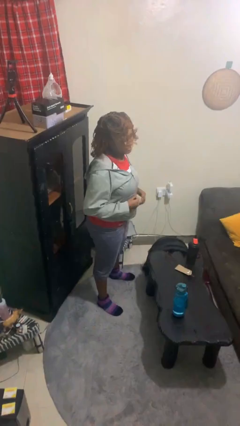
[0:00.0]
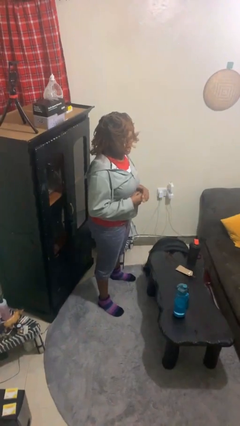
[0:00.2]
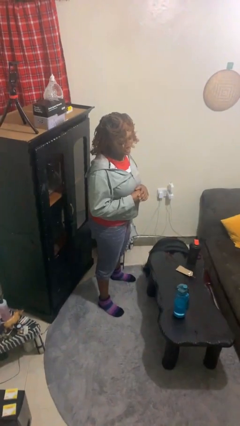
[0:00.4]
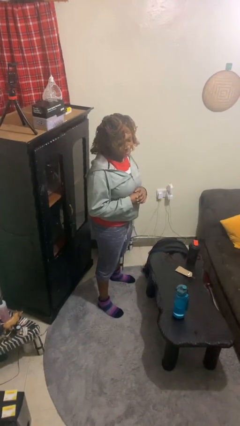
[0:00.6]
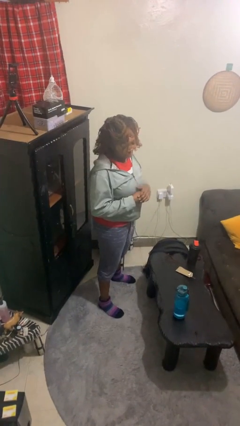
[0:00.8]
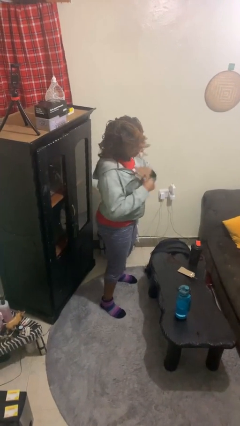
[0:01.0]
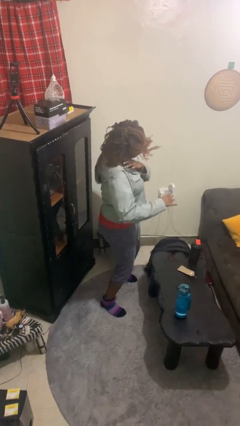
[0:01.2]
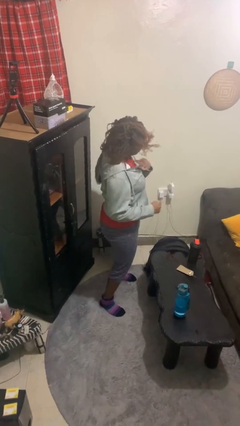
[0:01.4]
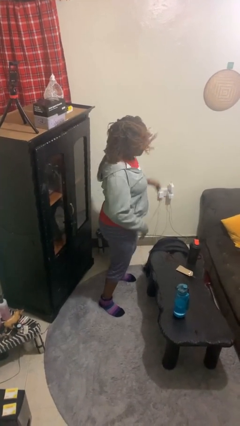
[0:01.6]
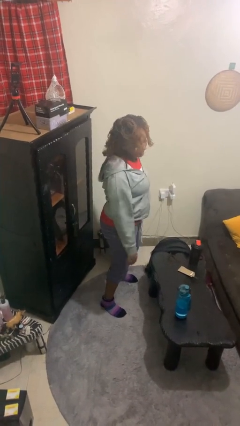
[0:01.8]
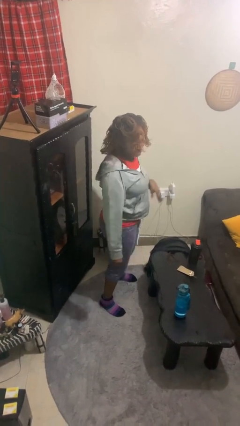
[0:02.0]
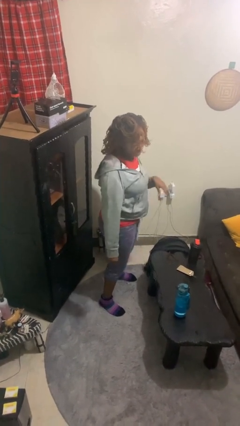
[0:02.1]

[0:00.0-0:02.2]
person karate chop

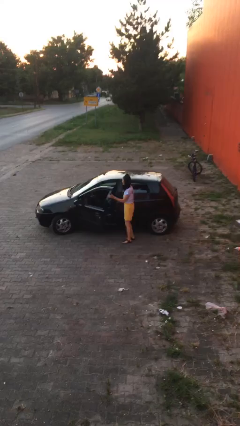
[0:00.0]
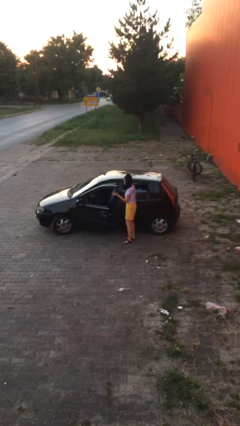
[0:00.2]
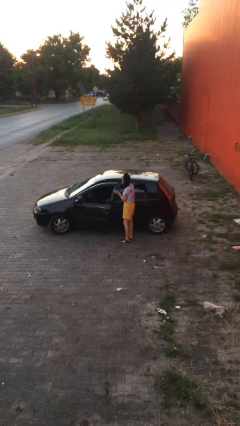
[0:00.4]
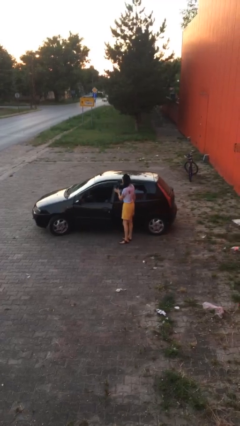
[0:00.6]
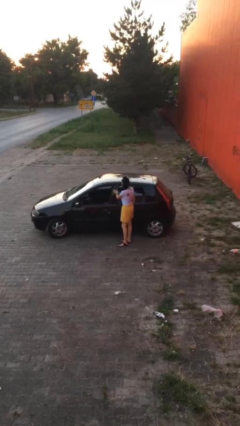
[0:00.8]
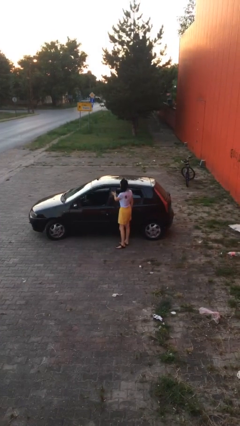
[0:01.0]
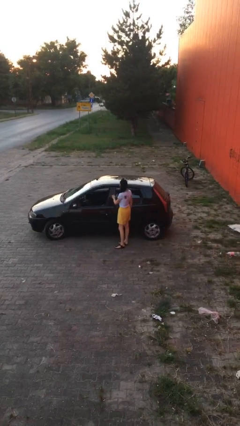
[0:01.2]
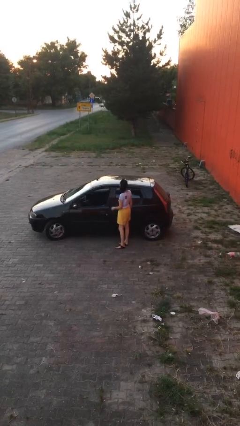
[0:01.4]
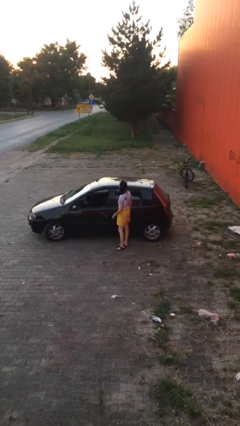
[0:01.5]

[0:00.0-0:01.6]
person closes car door

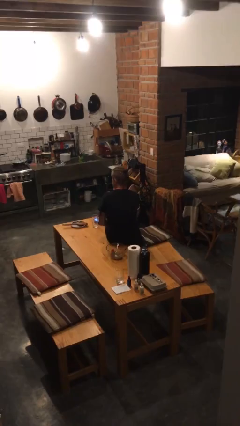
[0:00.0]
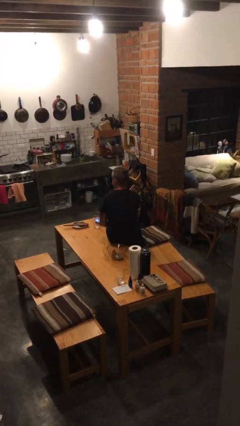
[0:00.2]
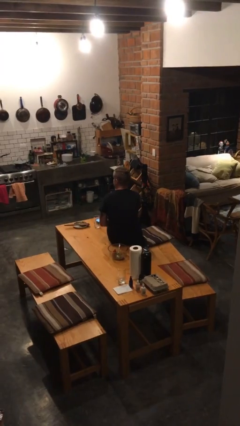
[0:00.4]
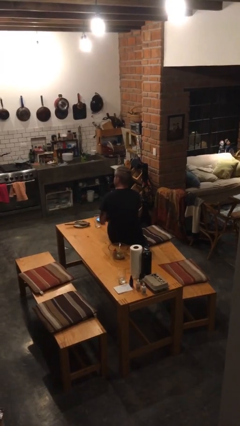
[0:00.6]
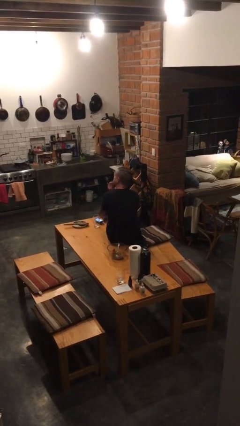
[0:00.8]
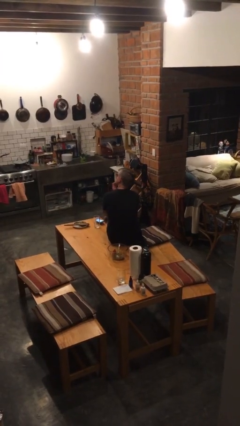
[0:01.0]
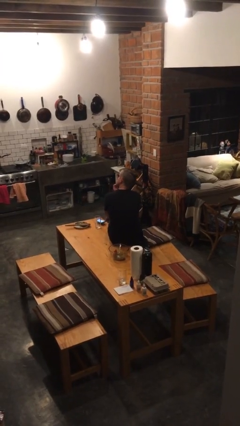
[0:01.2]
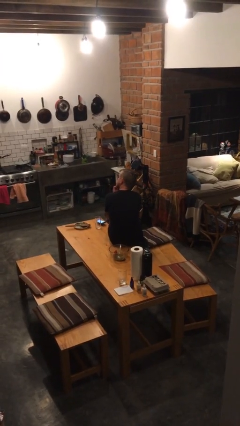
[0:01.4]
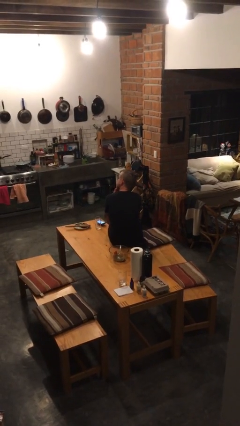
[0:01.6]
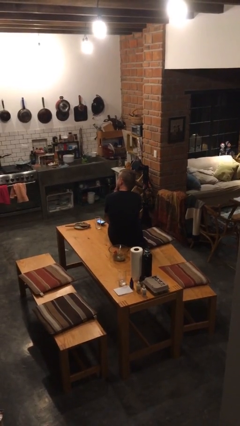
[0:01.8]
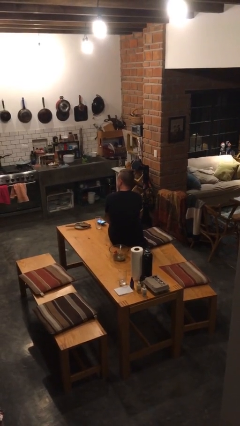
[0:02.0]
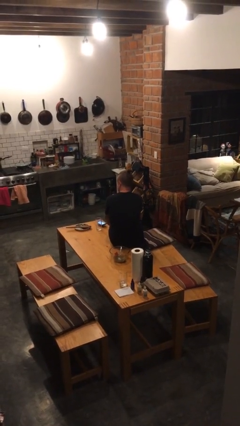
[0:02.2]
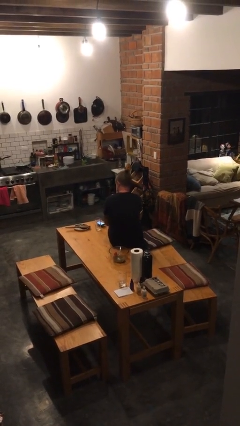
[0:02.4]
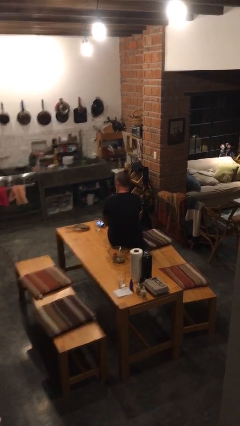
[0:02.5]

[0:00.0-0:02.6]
person strokes chin

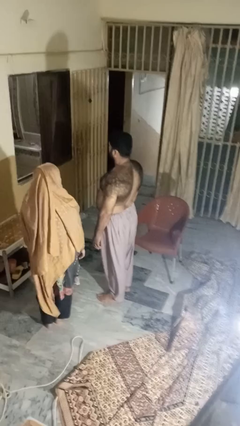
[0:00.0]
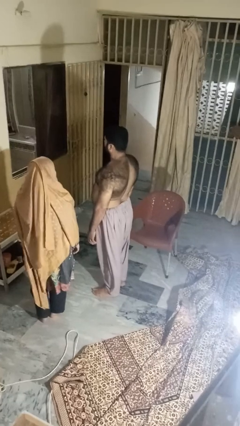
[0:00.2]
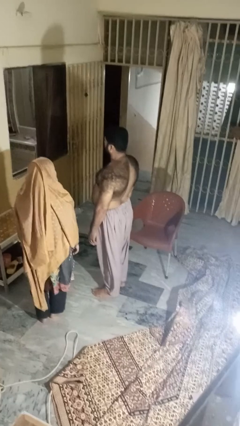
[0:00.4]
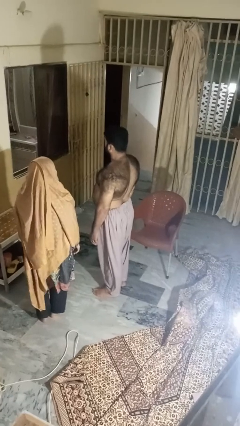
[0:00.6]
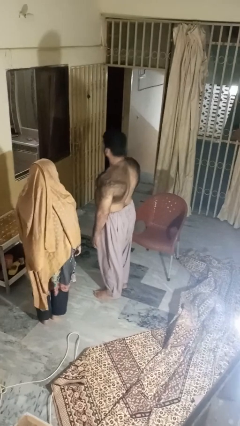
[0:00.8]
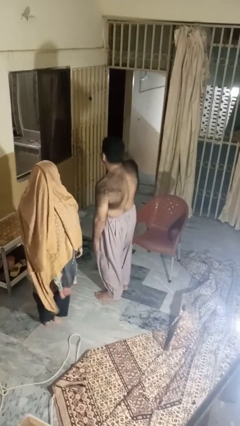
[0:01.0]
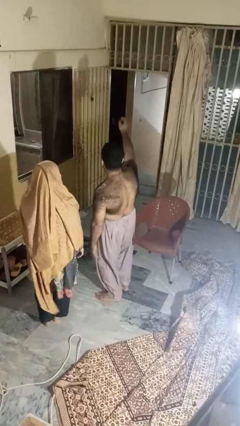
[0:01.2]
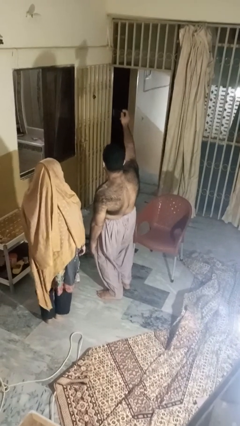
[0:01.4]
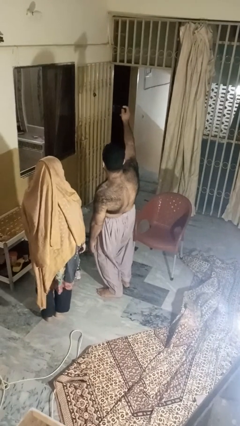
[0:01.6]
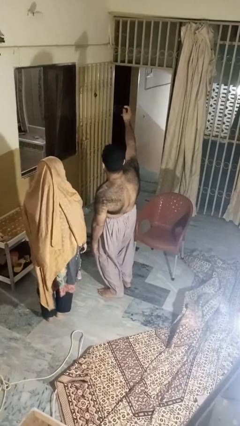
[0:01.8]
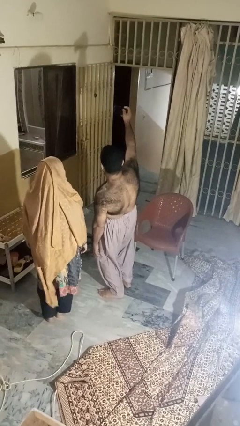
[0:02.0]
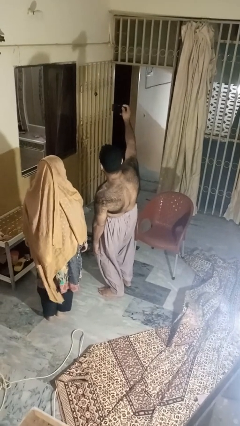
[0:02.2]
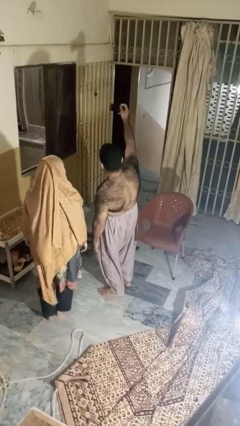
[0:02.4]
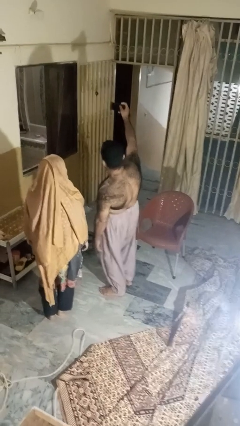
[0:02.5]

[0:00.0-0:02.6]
person takes selfie with person

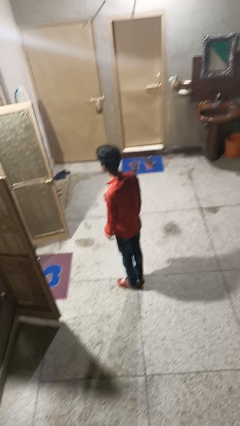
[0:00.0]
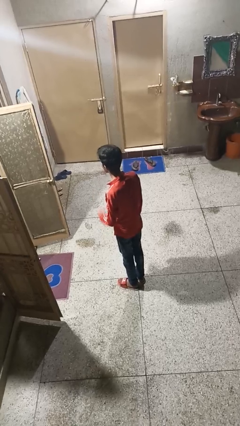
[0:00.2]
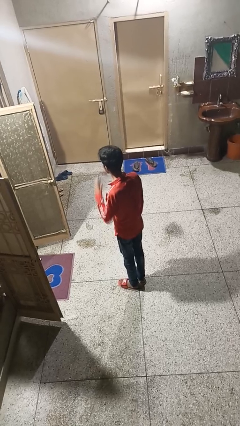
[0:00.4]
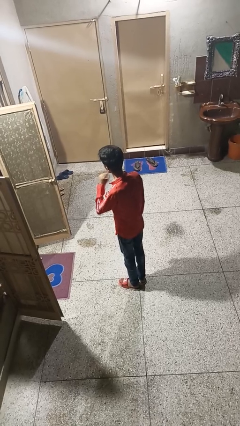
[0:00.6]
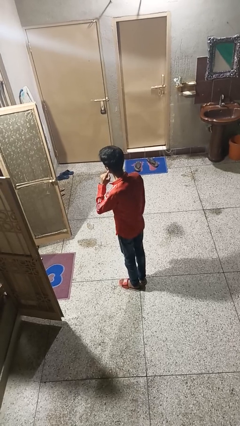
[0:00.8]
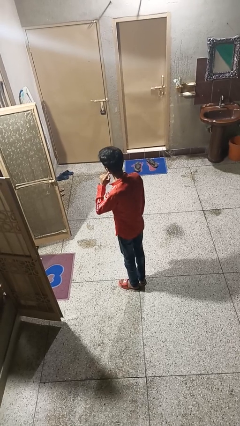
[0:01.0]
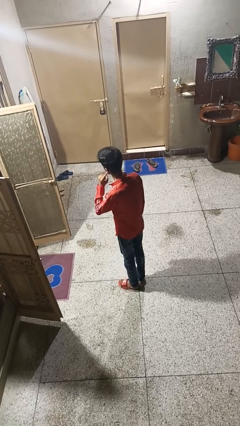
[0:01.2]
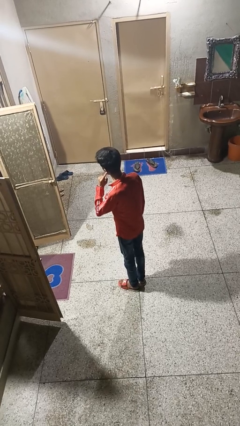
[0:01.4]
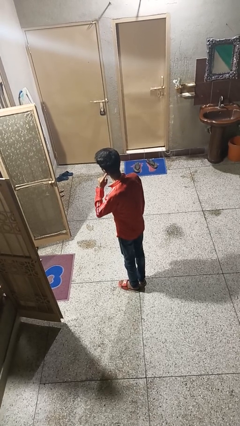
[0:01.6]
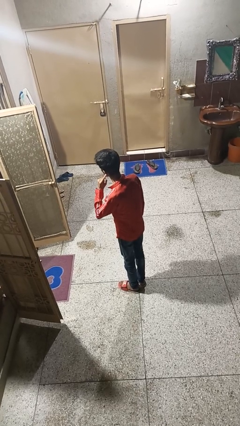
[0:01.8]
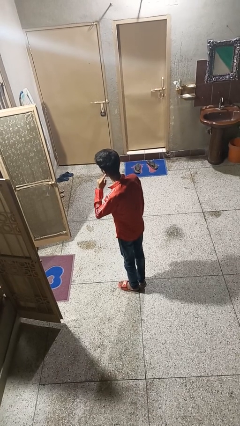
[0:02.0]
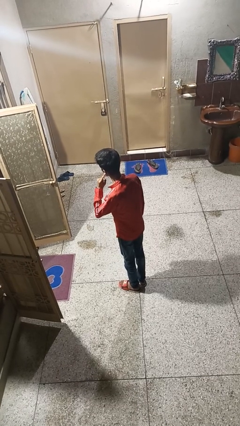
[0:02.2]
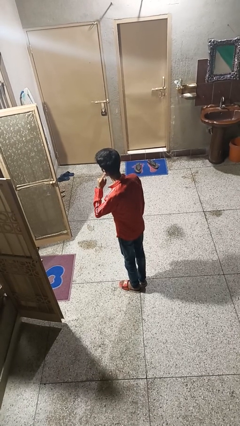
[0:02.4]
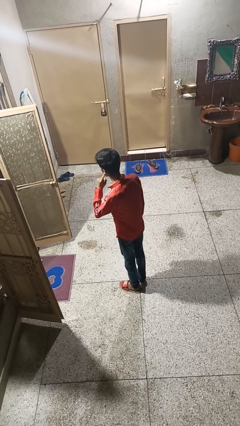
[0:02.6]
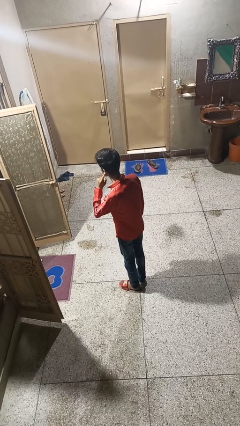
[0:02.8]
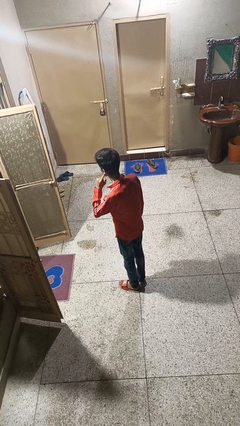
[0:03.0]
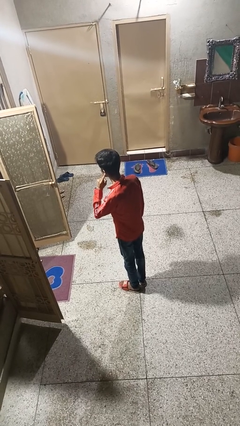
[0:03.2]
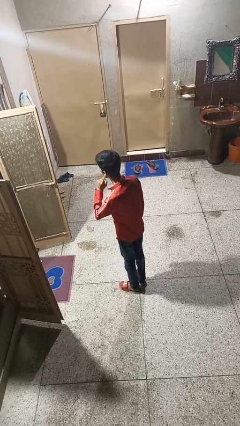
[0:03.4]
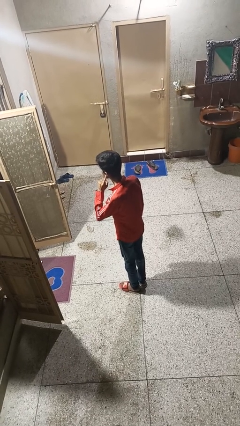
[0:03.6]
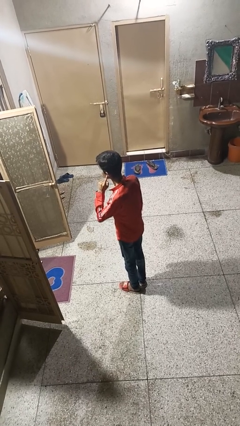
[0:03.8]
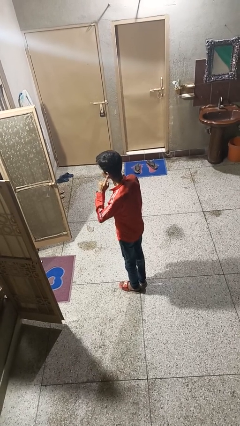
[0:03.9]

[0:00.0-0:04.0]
person gestures listen closely

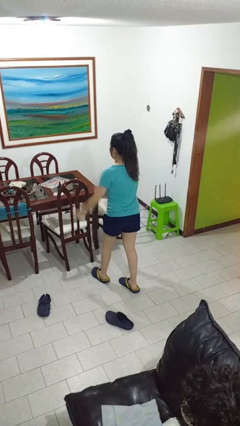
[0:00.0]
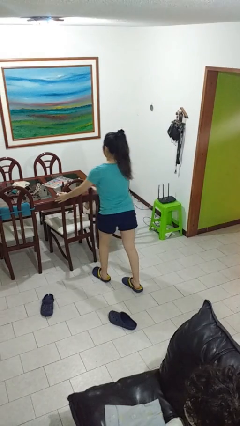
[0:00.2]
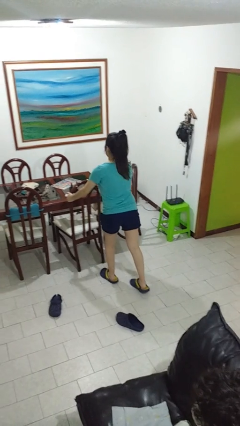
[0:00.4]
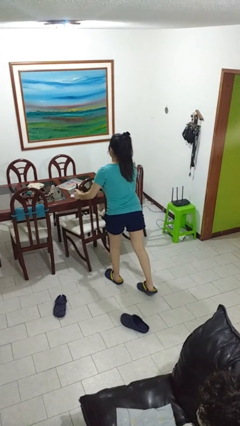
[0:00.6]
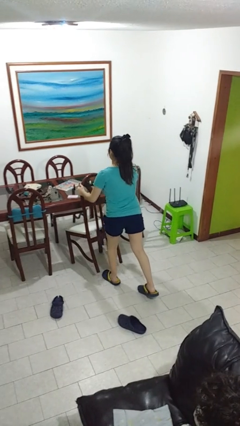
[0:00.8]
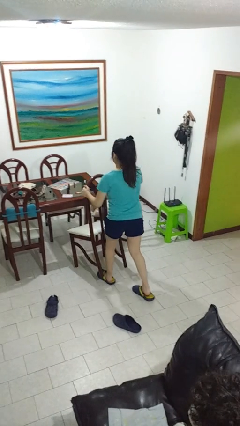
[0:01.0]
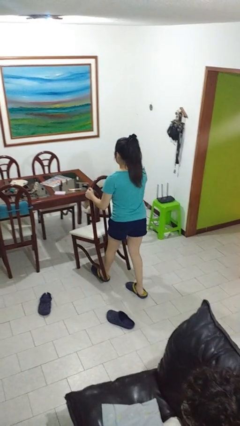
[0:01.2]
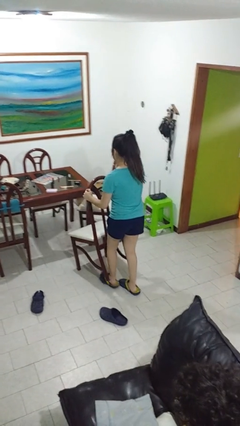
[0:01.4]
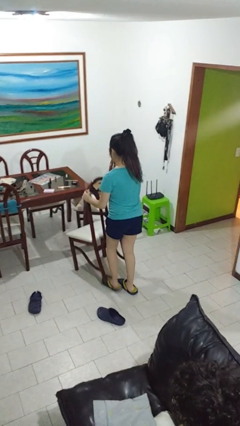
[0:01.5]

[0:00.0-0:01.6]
person pulls out chair

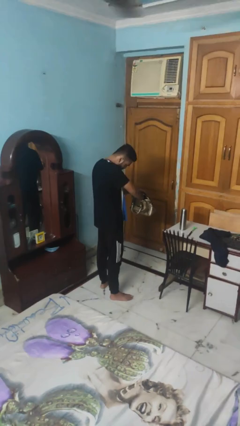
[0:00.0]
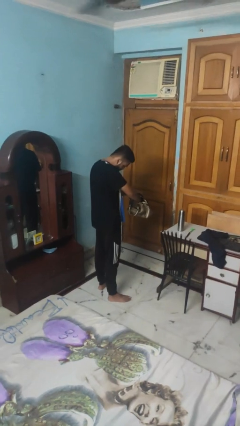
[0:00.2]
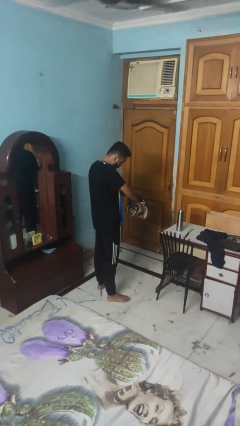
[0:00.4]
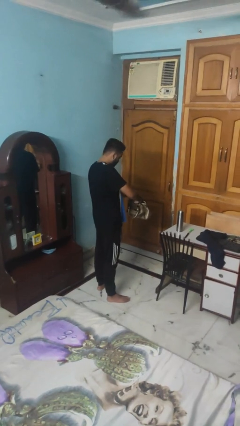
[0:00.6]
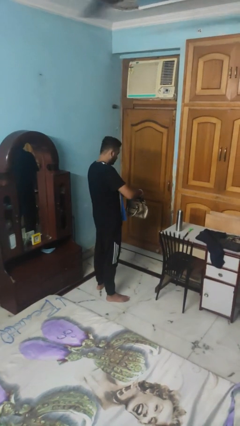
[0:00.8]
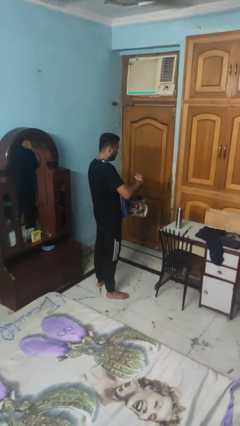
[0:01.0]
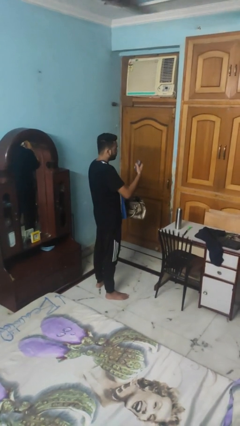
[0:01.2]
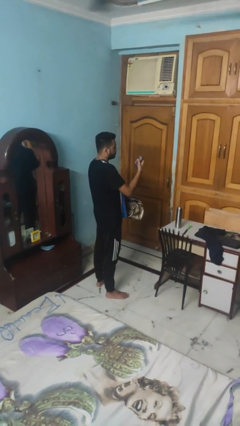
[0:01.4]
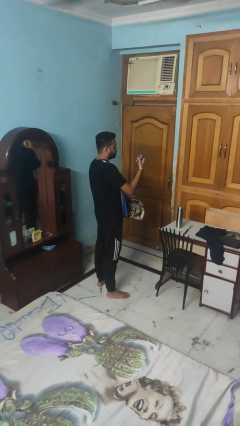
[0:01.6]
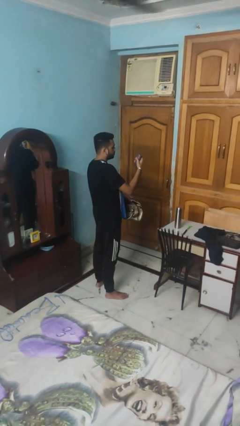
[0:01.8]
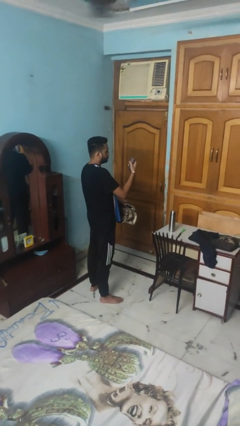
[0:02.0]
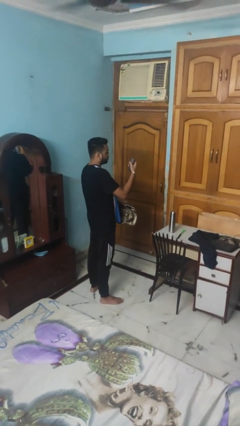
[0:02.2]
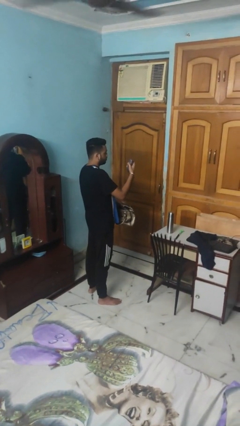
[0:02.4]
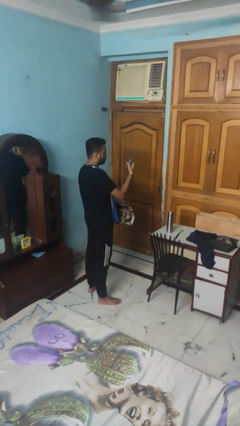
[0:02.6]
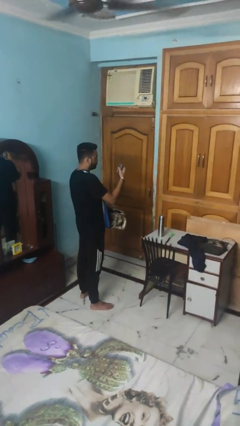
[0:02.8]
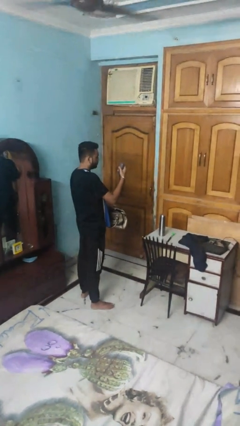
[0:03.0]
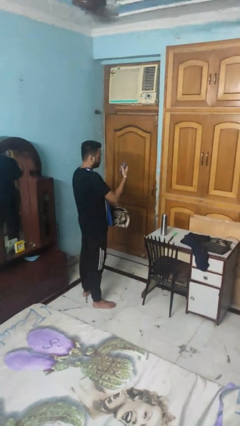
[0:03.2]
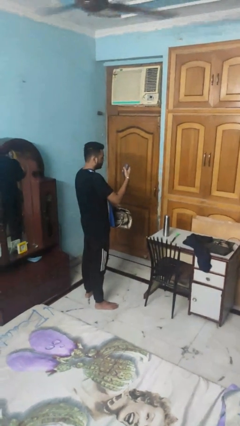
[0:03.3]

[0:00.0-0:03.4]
person takes object from purse
